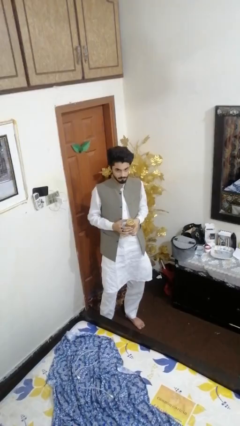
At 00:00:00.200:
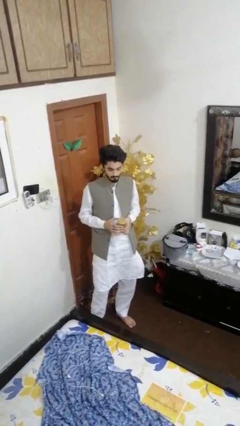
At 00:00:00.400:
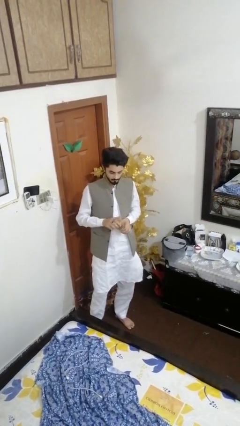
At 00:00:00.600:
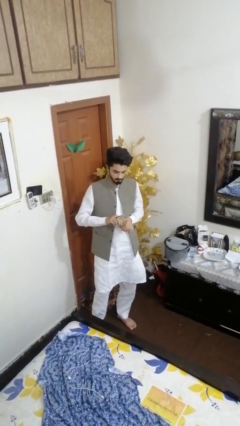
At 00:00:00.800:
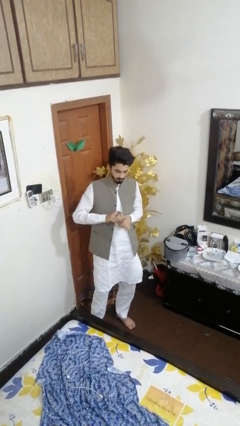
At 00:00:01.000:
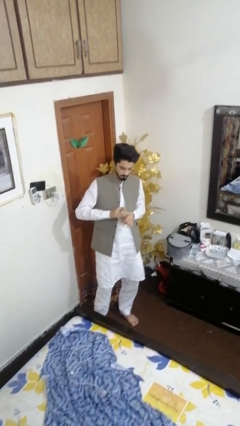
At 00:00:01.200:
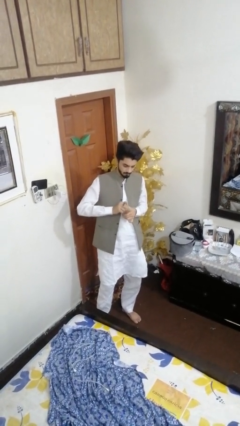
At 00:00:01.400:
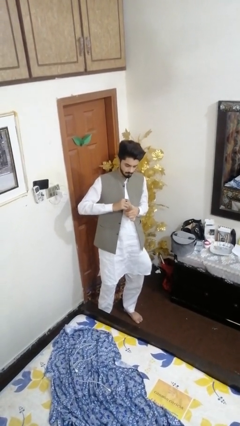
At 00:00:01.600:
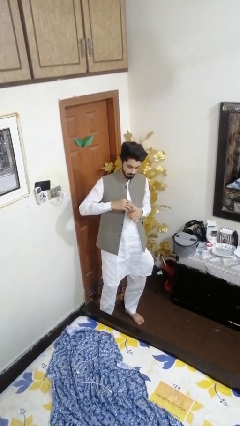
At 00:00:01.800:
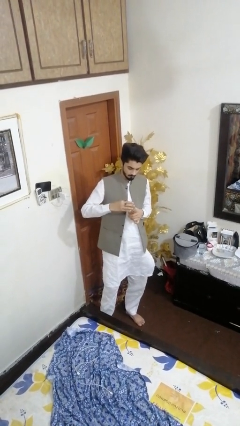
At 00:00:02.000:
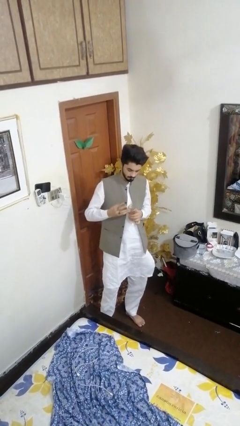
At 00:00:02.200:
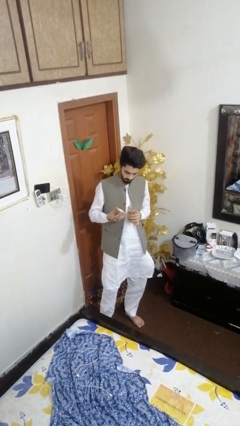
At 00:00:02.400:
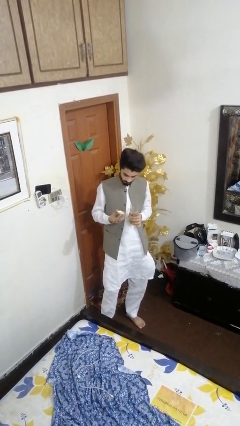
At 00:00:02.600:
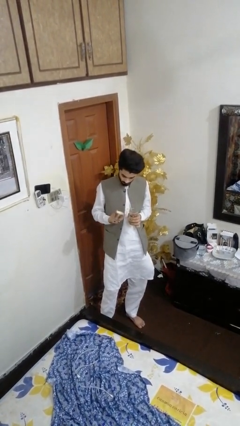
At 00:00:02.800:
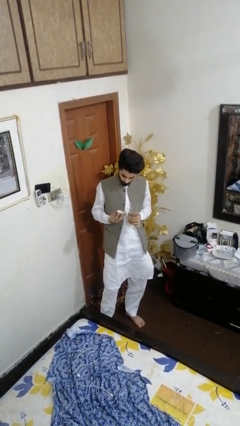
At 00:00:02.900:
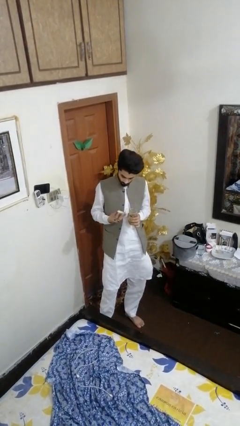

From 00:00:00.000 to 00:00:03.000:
person opens jar

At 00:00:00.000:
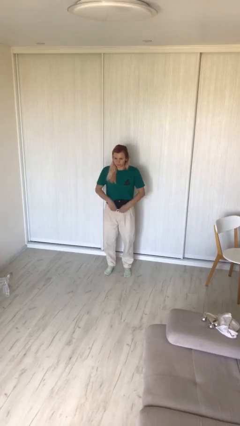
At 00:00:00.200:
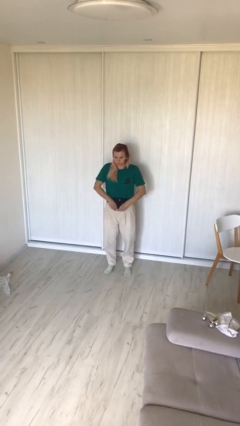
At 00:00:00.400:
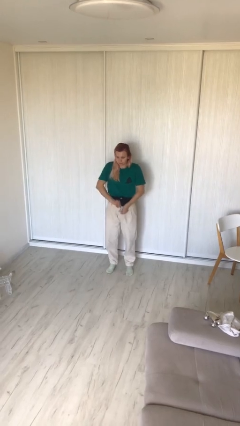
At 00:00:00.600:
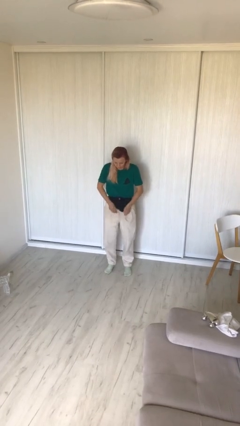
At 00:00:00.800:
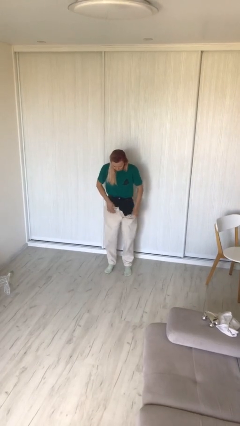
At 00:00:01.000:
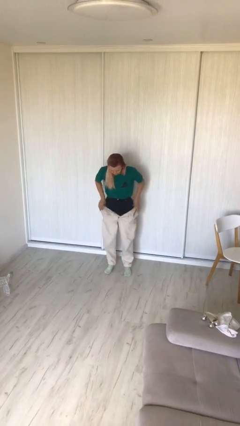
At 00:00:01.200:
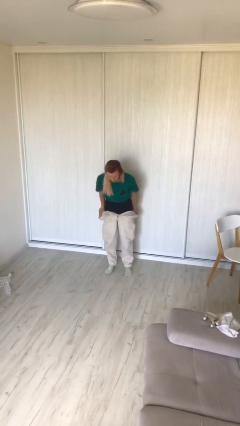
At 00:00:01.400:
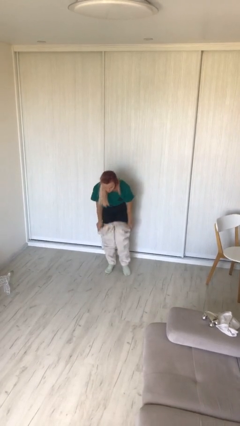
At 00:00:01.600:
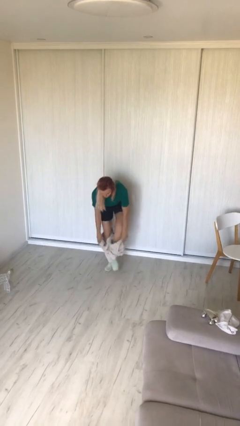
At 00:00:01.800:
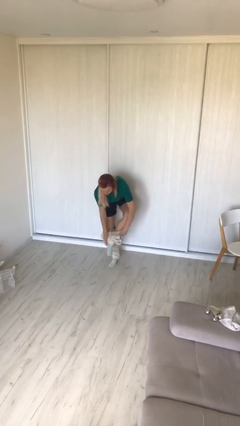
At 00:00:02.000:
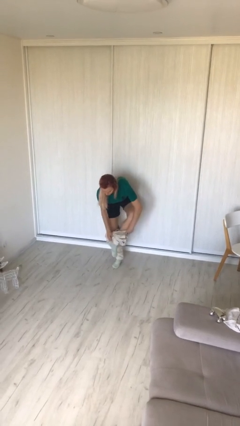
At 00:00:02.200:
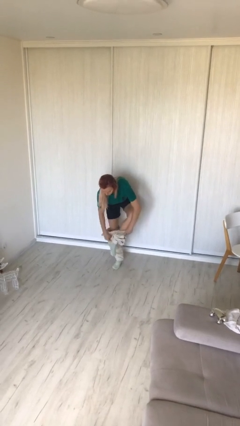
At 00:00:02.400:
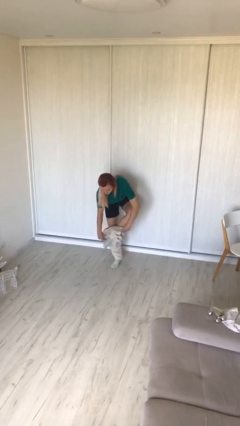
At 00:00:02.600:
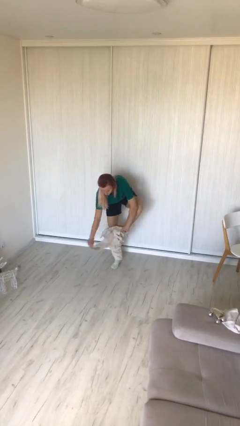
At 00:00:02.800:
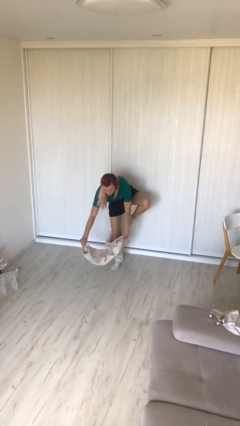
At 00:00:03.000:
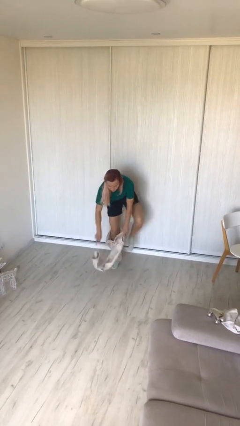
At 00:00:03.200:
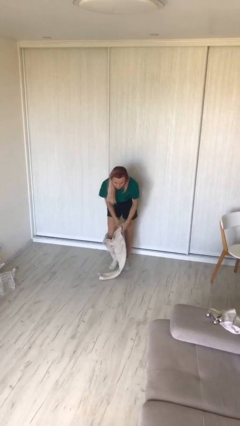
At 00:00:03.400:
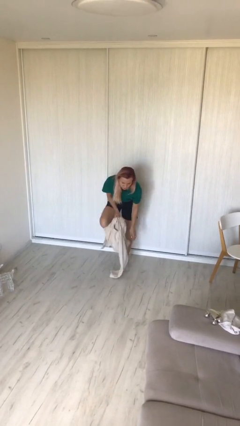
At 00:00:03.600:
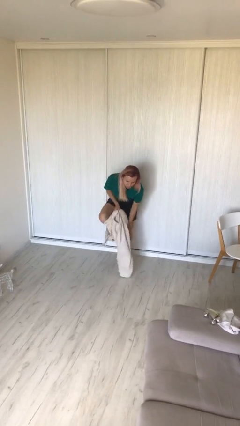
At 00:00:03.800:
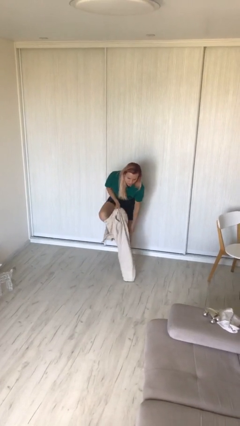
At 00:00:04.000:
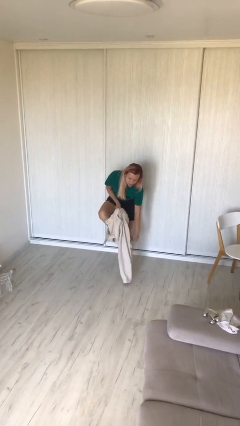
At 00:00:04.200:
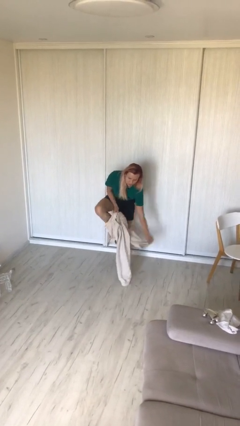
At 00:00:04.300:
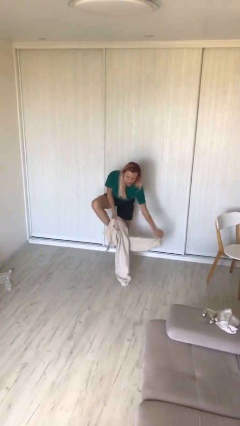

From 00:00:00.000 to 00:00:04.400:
person takes off pants

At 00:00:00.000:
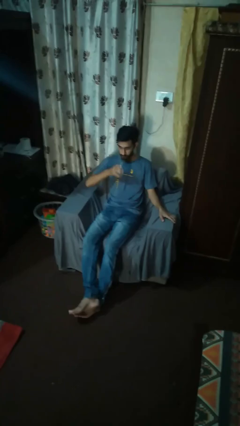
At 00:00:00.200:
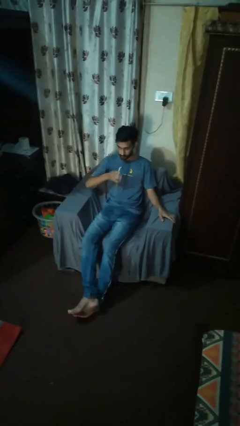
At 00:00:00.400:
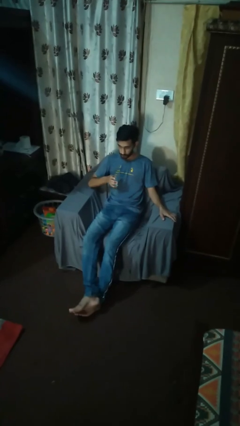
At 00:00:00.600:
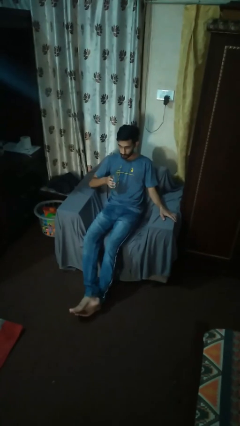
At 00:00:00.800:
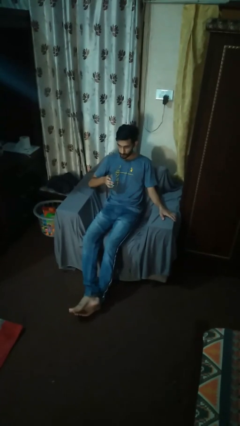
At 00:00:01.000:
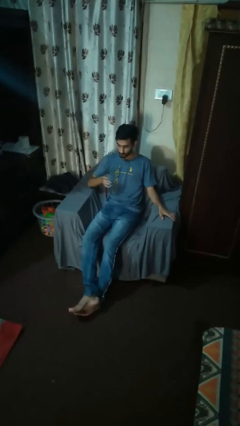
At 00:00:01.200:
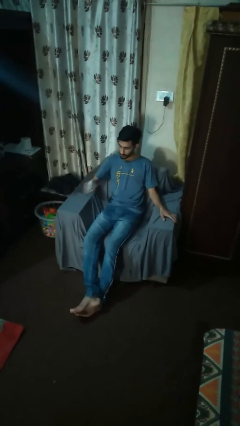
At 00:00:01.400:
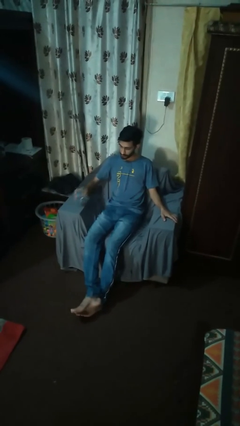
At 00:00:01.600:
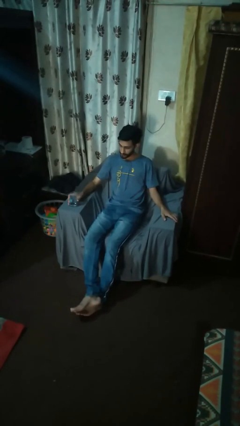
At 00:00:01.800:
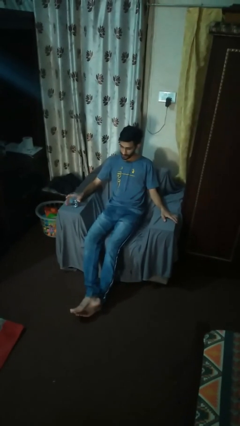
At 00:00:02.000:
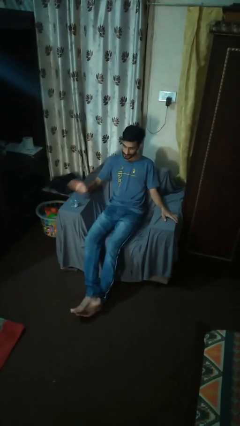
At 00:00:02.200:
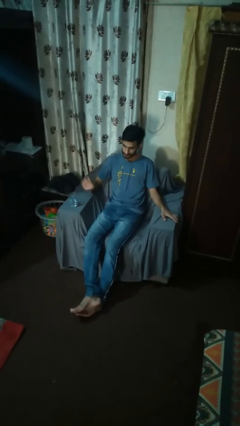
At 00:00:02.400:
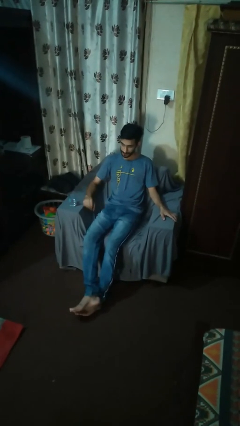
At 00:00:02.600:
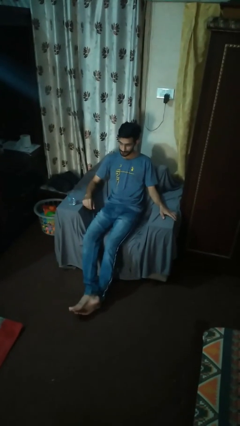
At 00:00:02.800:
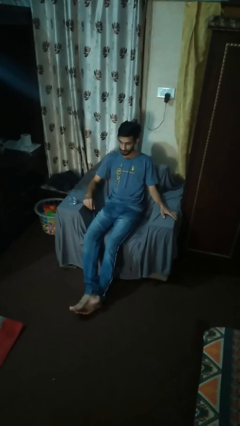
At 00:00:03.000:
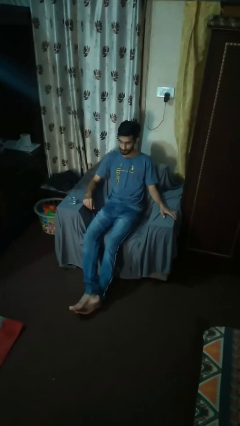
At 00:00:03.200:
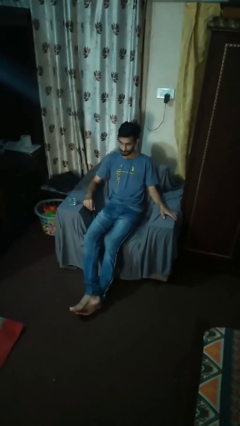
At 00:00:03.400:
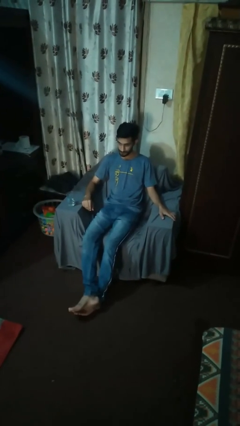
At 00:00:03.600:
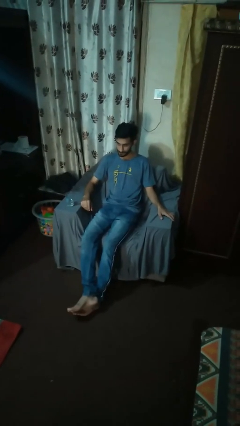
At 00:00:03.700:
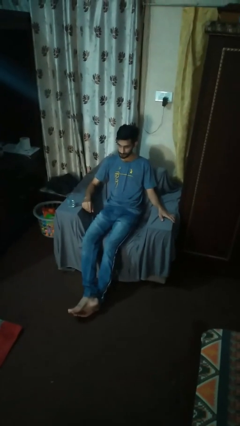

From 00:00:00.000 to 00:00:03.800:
person puts down object on table

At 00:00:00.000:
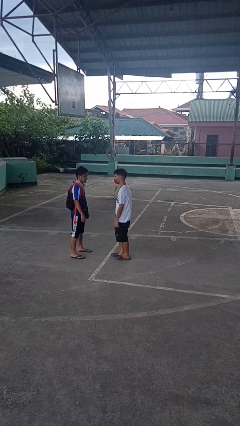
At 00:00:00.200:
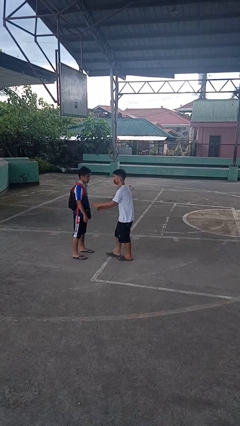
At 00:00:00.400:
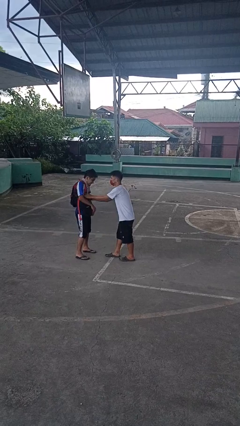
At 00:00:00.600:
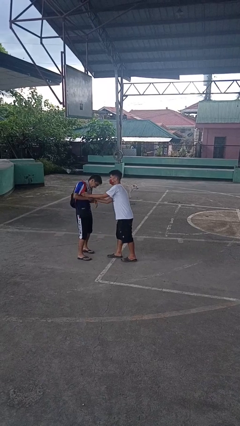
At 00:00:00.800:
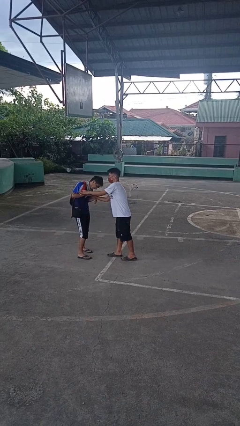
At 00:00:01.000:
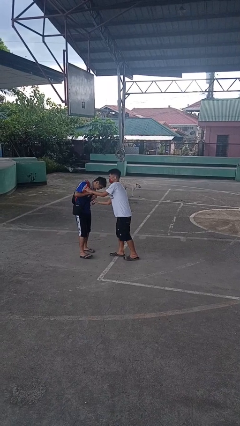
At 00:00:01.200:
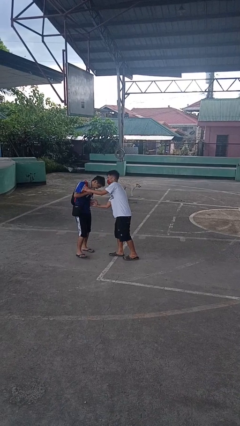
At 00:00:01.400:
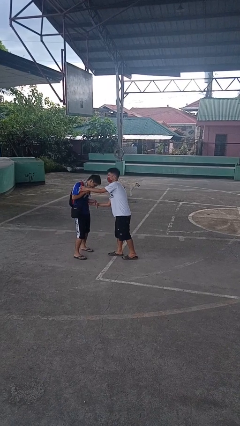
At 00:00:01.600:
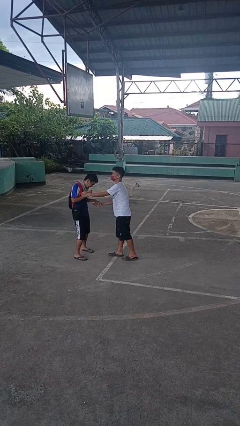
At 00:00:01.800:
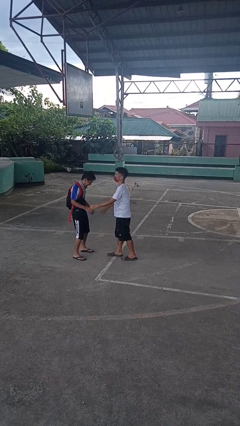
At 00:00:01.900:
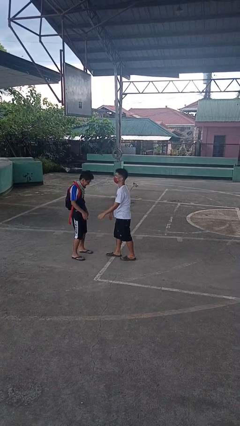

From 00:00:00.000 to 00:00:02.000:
person tickles person

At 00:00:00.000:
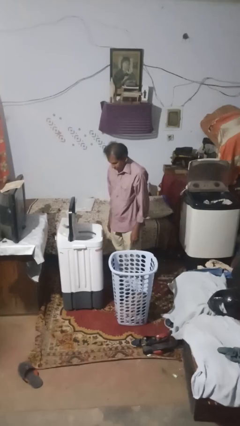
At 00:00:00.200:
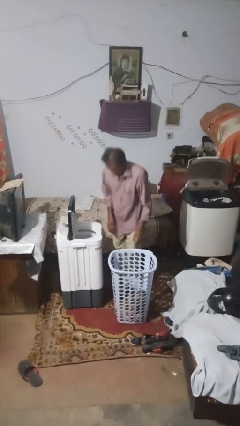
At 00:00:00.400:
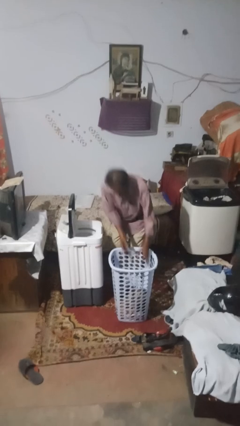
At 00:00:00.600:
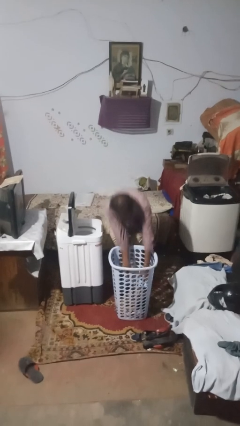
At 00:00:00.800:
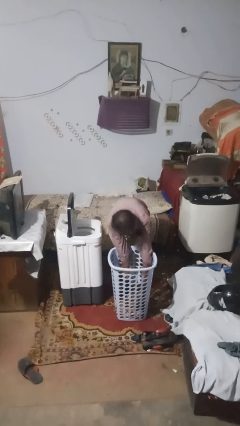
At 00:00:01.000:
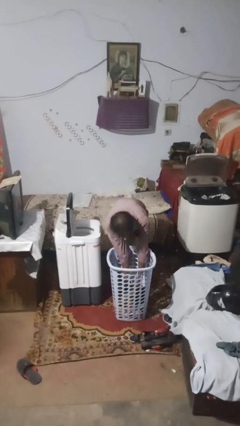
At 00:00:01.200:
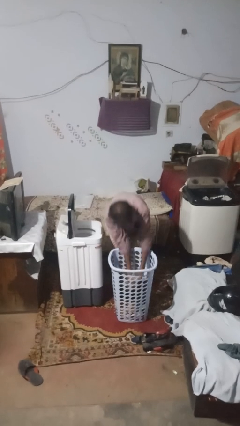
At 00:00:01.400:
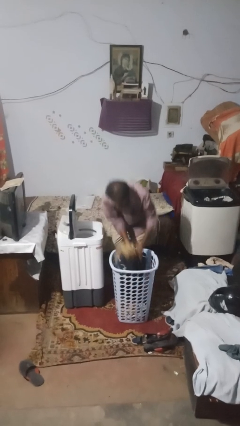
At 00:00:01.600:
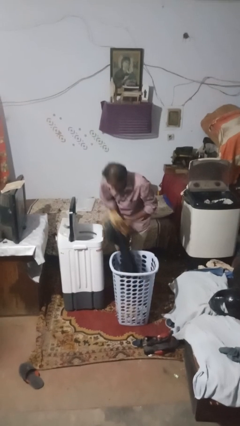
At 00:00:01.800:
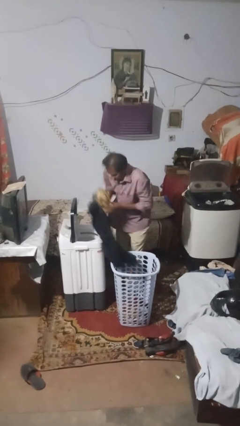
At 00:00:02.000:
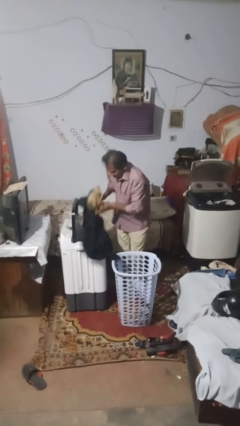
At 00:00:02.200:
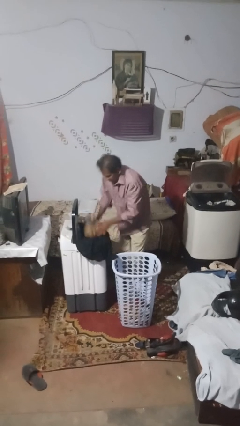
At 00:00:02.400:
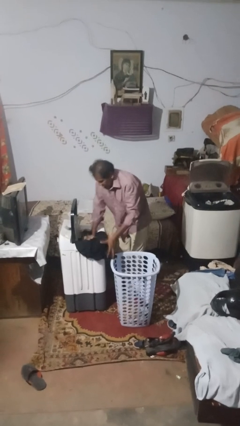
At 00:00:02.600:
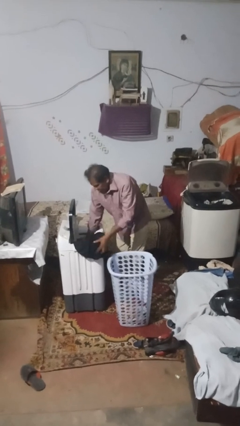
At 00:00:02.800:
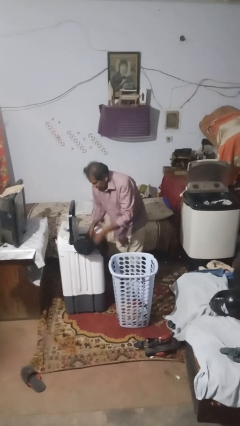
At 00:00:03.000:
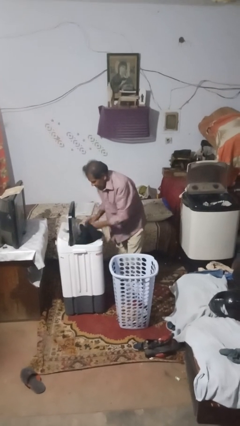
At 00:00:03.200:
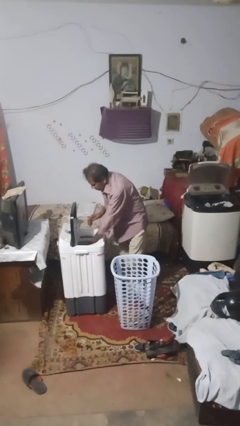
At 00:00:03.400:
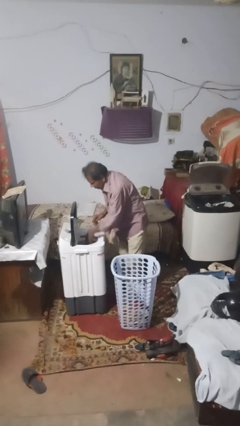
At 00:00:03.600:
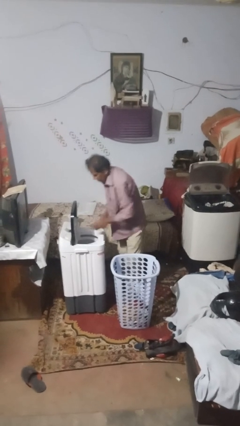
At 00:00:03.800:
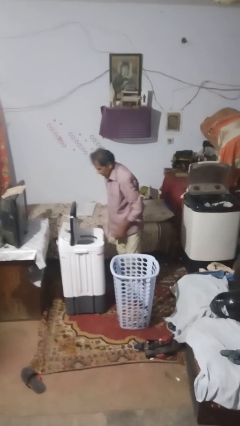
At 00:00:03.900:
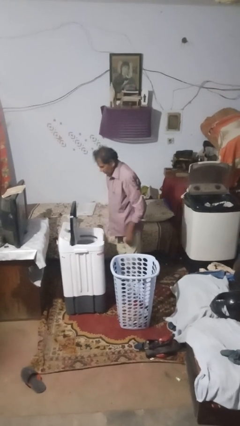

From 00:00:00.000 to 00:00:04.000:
person unloads dryer
